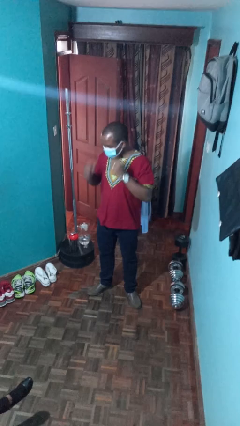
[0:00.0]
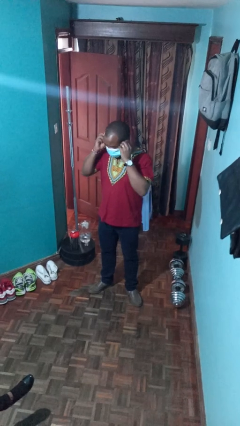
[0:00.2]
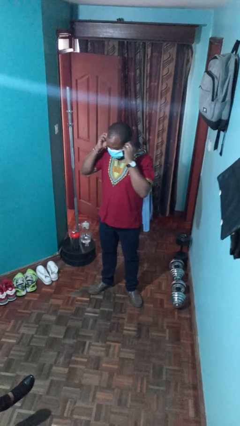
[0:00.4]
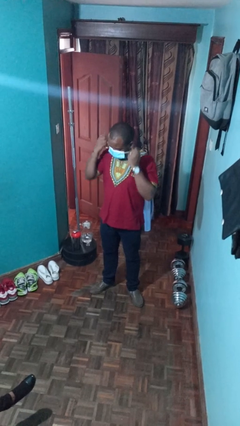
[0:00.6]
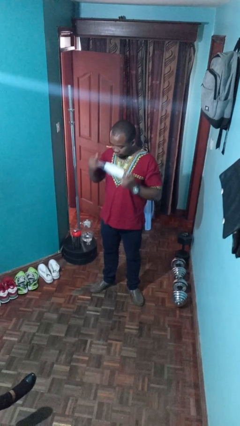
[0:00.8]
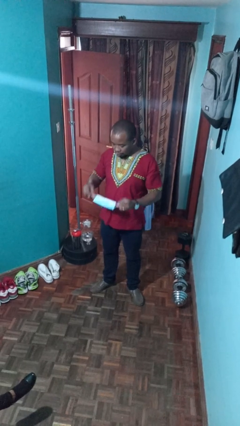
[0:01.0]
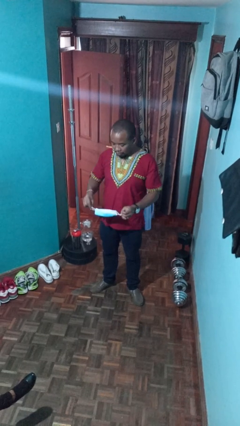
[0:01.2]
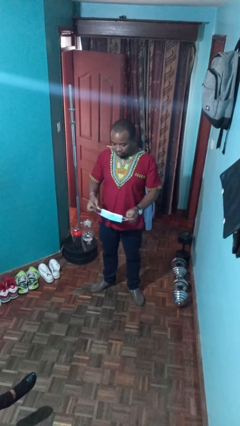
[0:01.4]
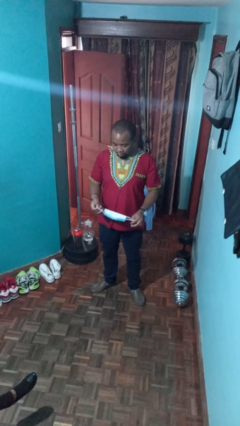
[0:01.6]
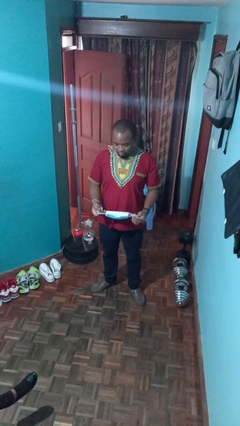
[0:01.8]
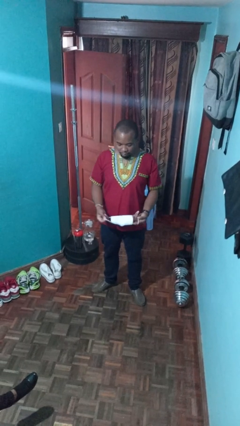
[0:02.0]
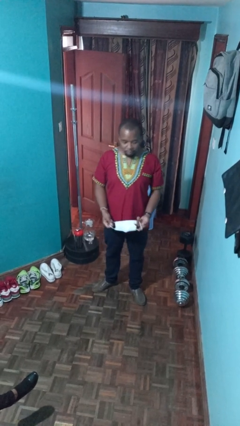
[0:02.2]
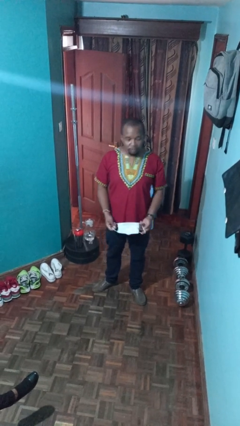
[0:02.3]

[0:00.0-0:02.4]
person takes off facemask

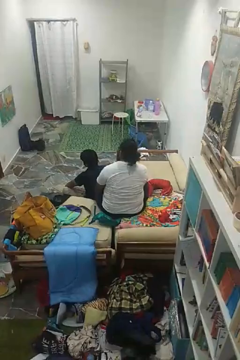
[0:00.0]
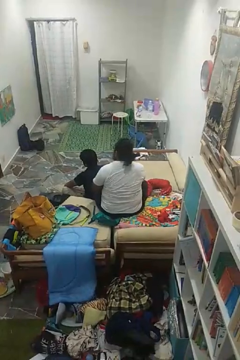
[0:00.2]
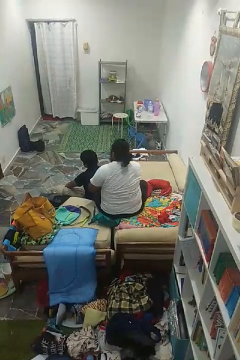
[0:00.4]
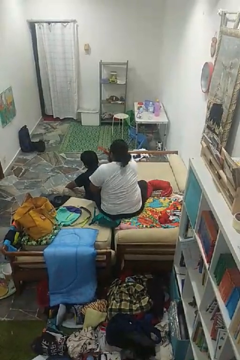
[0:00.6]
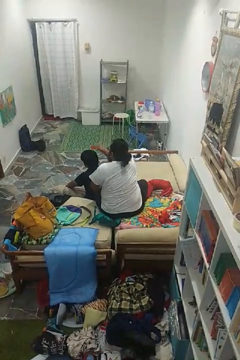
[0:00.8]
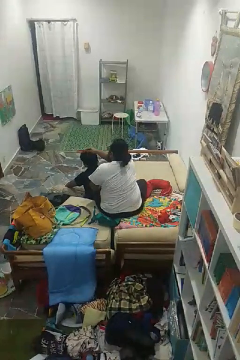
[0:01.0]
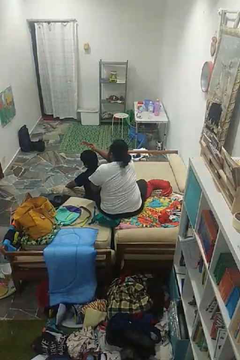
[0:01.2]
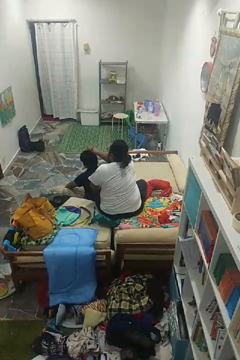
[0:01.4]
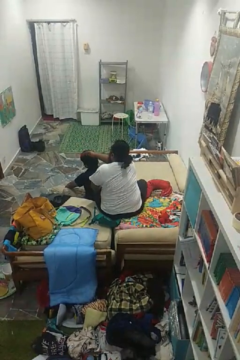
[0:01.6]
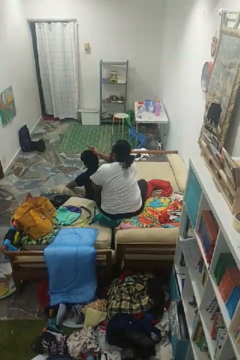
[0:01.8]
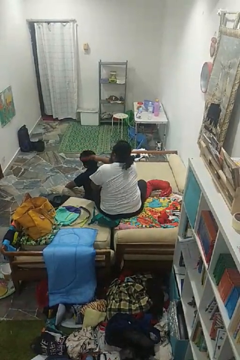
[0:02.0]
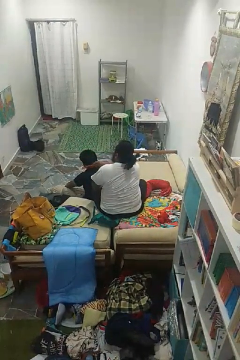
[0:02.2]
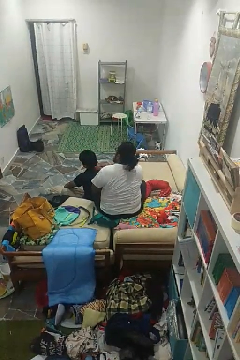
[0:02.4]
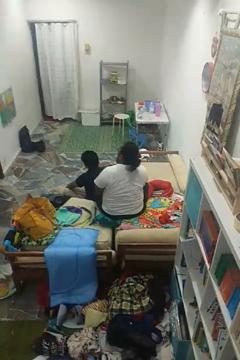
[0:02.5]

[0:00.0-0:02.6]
person brushes hair of person

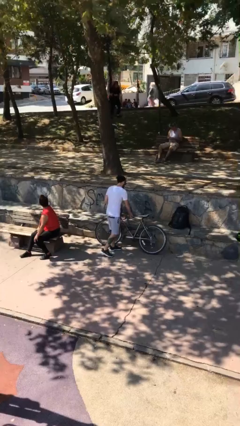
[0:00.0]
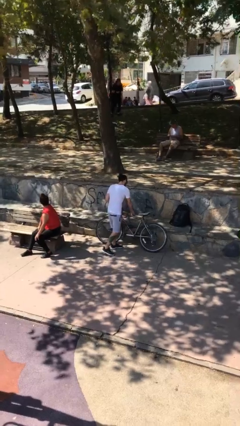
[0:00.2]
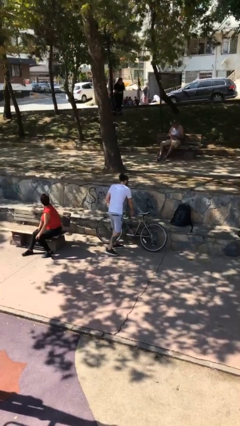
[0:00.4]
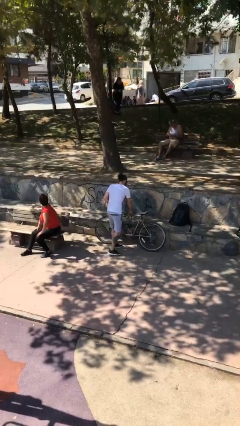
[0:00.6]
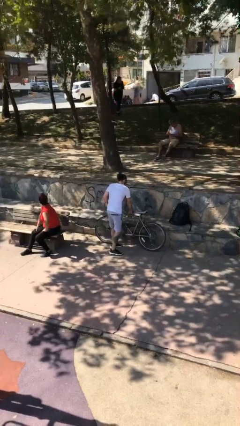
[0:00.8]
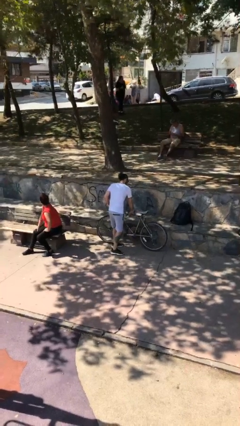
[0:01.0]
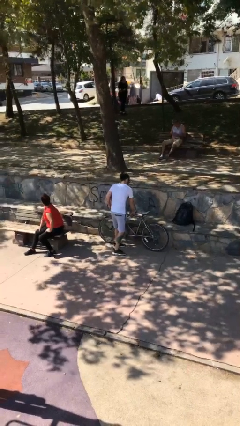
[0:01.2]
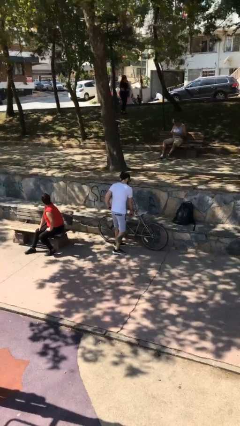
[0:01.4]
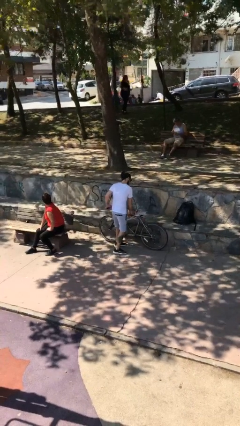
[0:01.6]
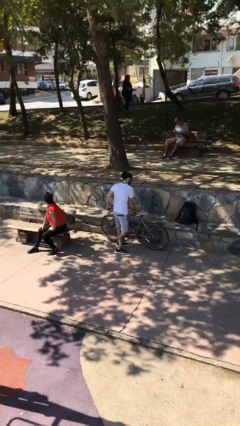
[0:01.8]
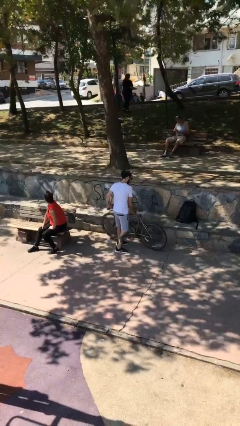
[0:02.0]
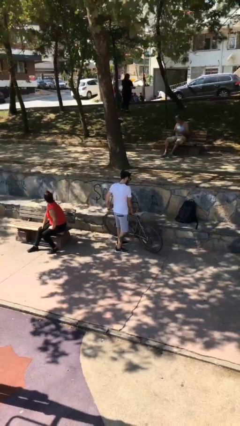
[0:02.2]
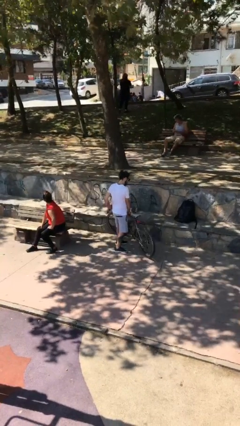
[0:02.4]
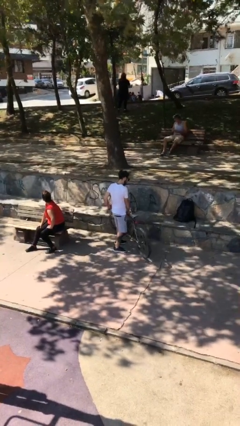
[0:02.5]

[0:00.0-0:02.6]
person picks up object from floor

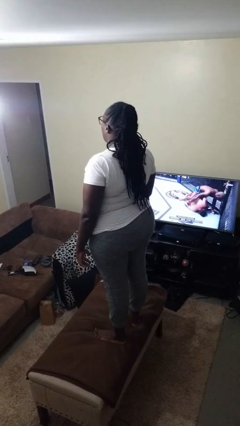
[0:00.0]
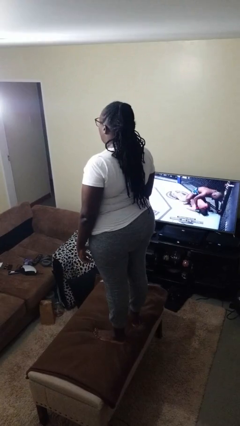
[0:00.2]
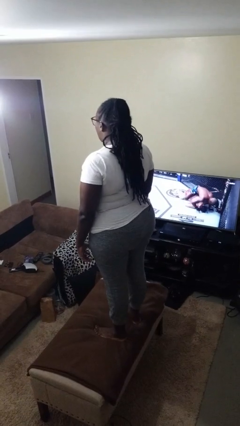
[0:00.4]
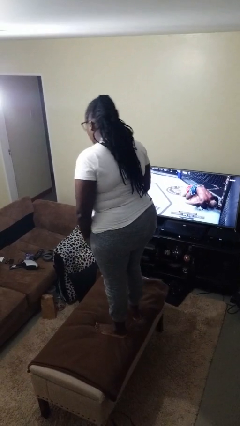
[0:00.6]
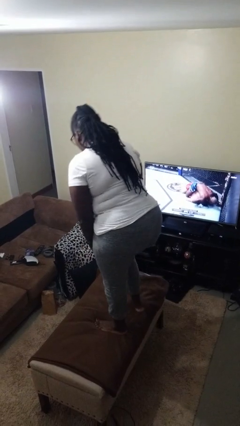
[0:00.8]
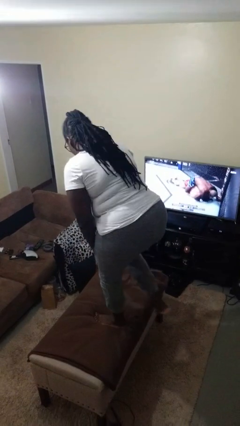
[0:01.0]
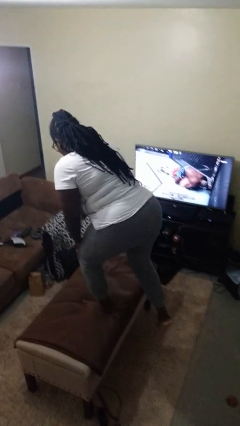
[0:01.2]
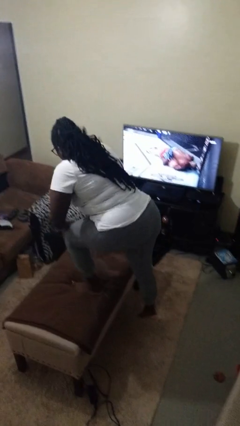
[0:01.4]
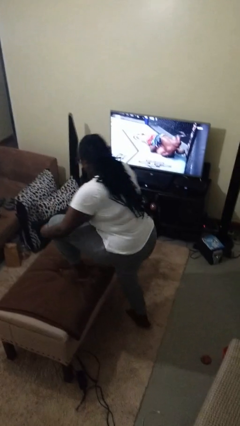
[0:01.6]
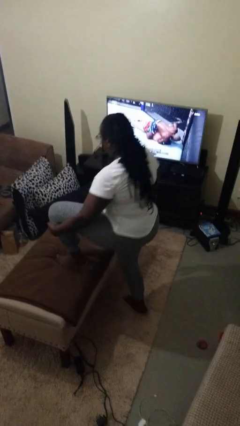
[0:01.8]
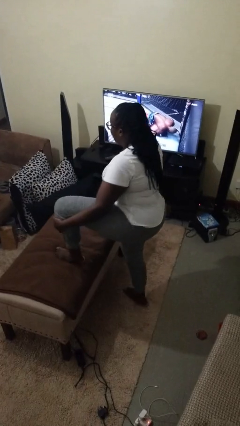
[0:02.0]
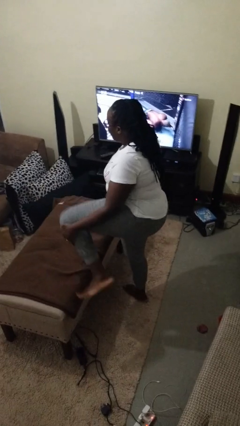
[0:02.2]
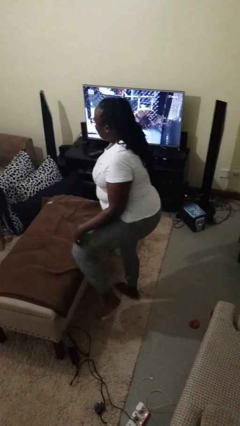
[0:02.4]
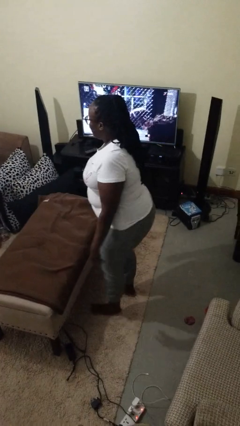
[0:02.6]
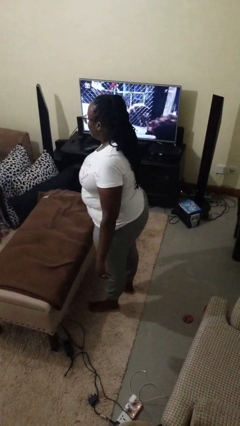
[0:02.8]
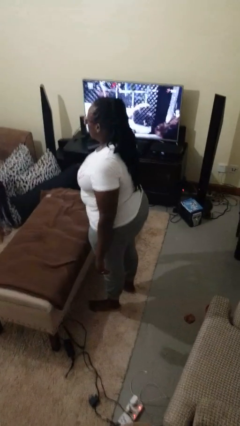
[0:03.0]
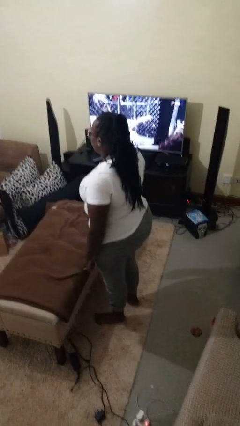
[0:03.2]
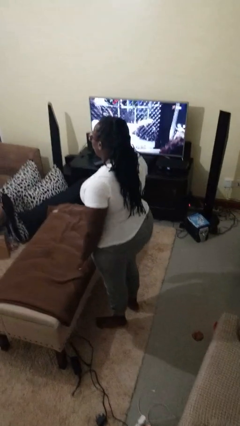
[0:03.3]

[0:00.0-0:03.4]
person climbs off table

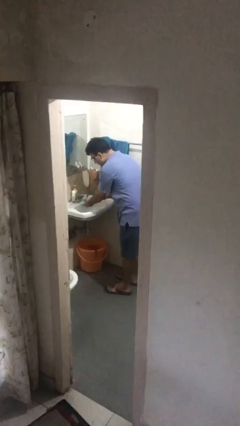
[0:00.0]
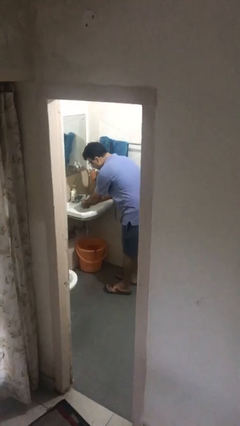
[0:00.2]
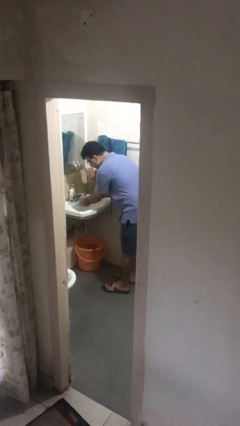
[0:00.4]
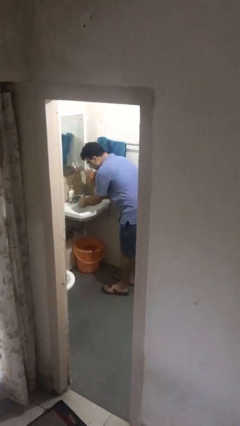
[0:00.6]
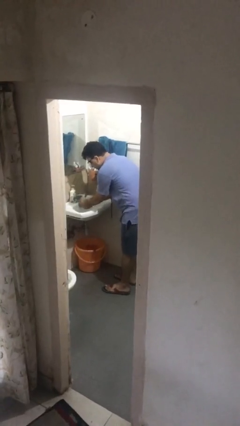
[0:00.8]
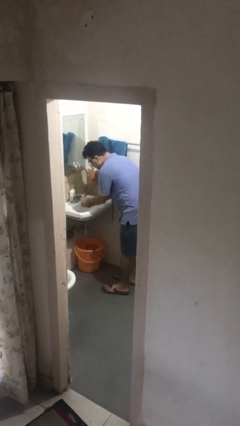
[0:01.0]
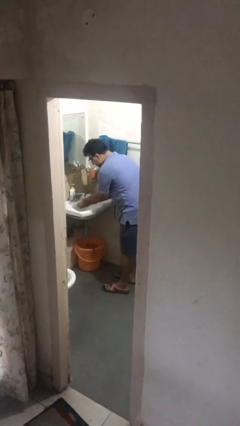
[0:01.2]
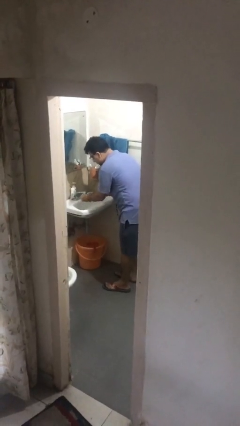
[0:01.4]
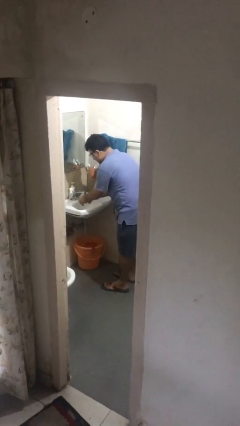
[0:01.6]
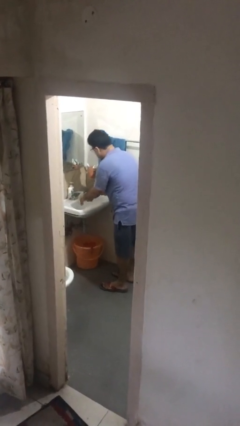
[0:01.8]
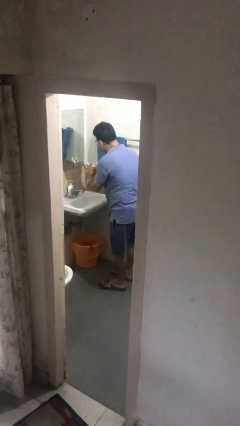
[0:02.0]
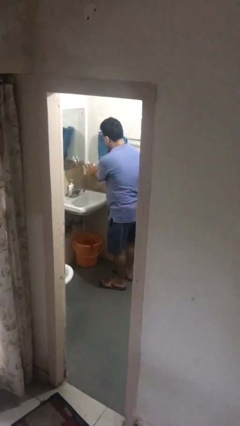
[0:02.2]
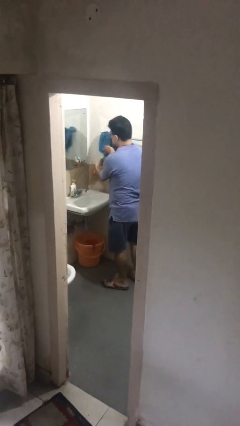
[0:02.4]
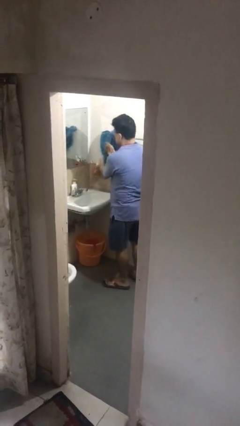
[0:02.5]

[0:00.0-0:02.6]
person washes hands

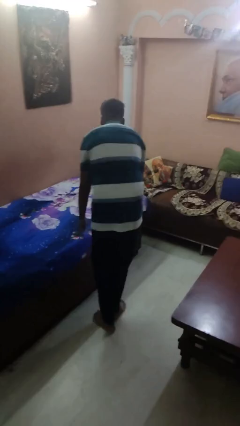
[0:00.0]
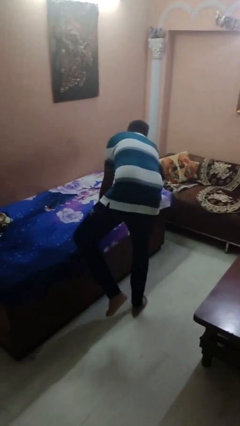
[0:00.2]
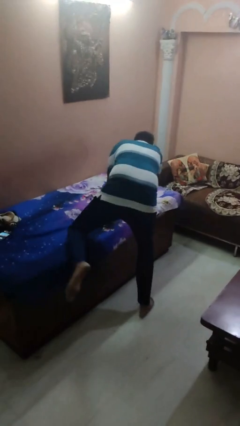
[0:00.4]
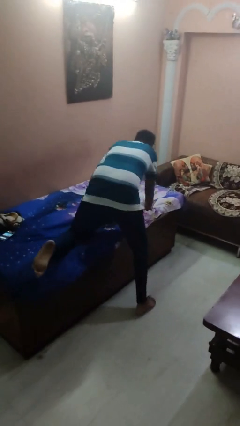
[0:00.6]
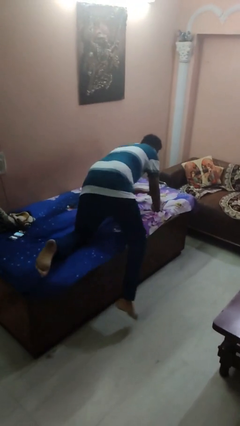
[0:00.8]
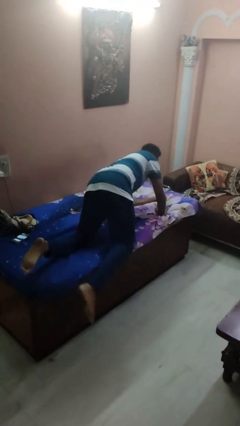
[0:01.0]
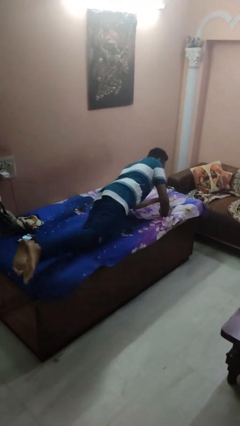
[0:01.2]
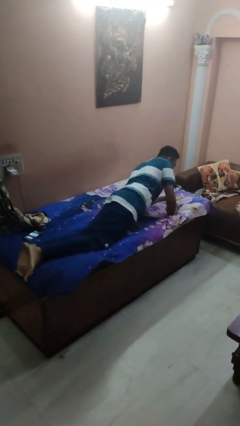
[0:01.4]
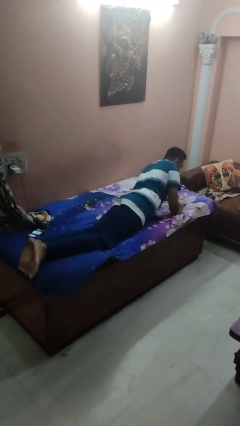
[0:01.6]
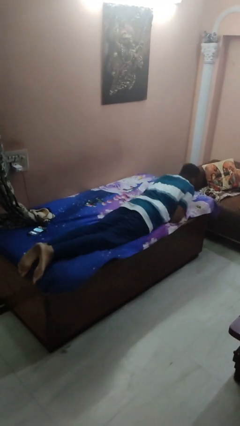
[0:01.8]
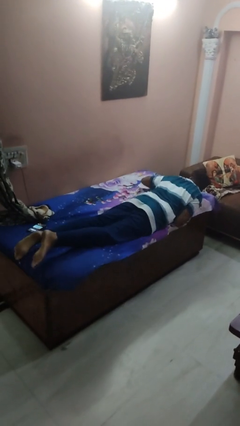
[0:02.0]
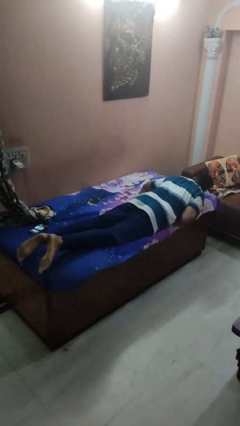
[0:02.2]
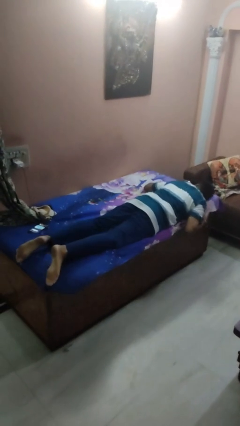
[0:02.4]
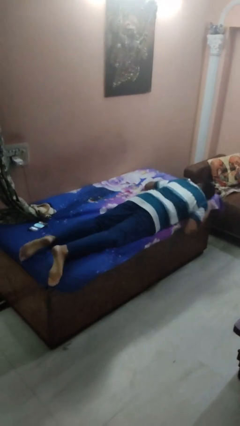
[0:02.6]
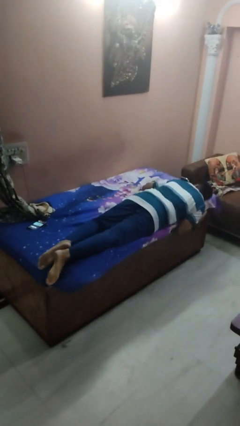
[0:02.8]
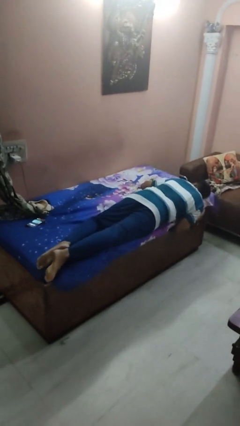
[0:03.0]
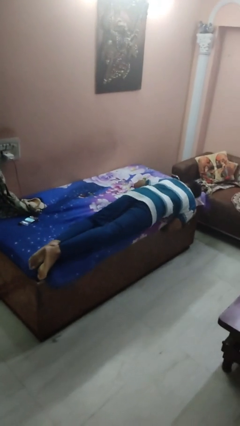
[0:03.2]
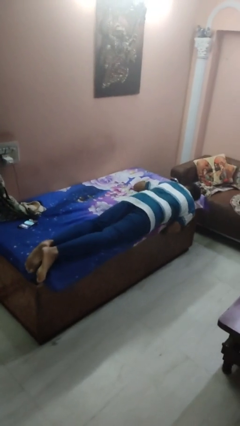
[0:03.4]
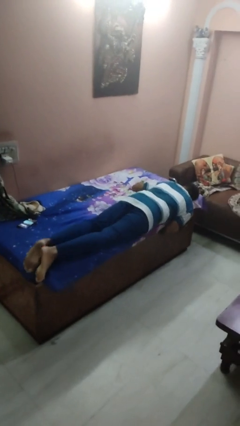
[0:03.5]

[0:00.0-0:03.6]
person lies down on bed

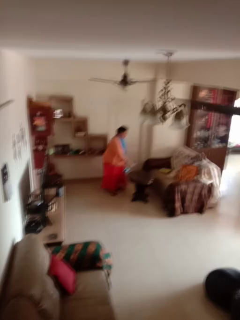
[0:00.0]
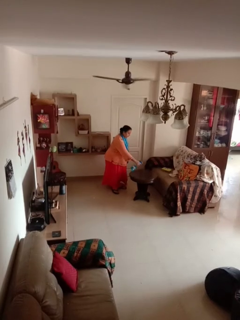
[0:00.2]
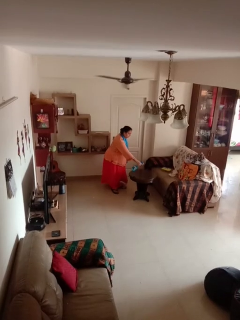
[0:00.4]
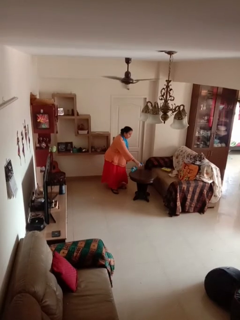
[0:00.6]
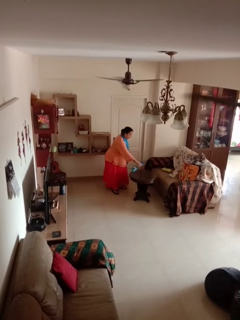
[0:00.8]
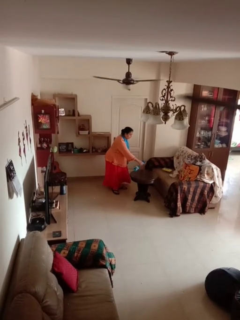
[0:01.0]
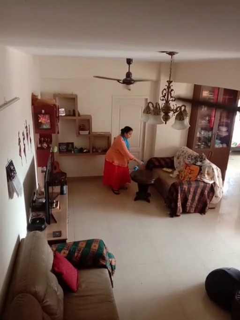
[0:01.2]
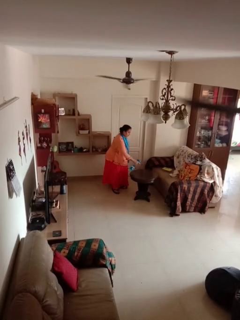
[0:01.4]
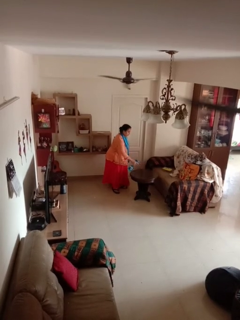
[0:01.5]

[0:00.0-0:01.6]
person sprays from bottle
